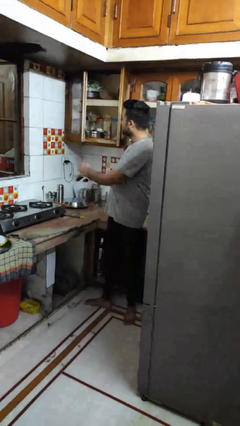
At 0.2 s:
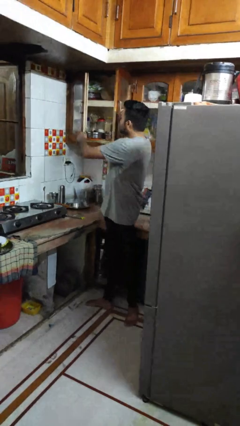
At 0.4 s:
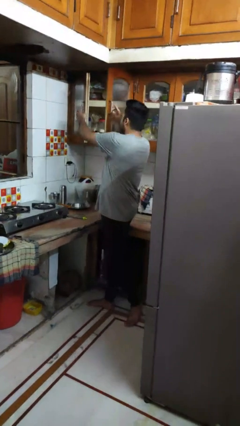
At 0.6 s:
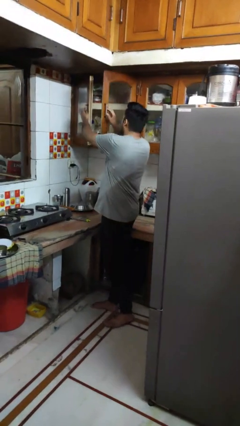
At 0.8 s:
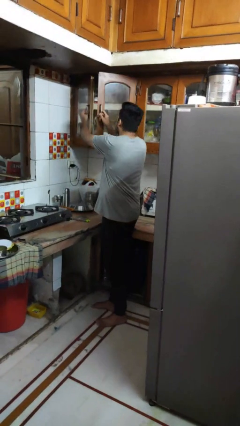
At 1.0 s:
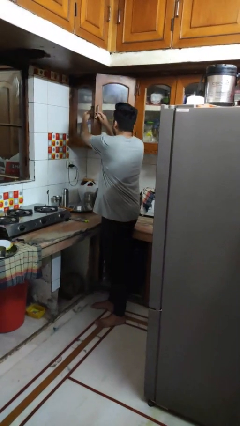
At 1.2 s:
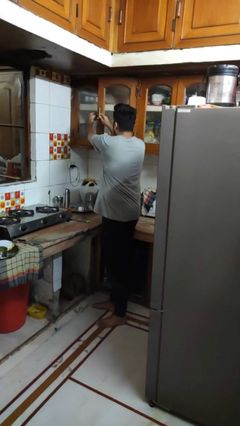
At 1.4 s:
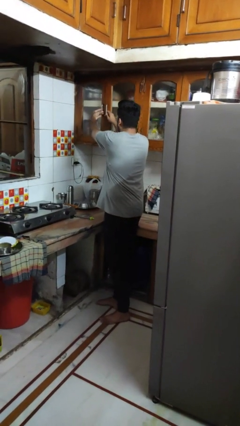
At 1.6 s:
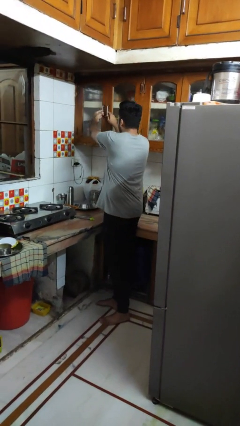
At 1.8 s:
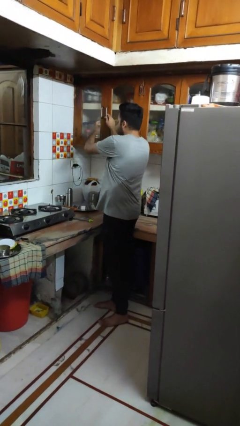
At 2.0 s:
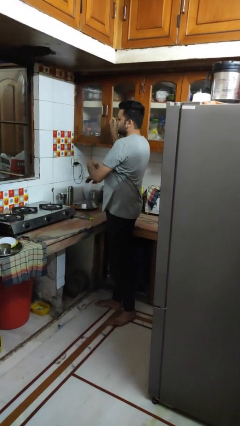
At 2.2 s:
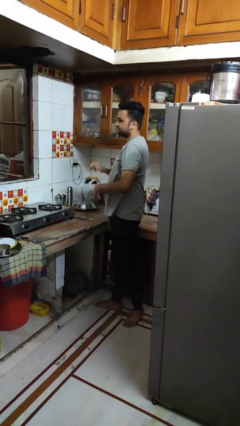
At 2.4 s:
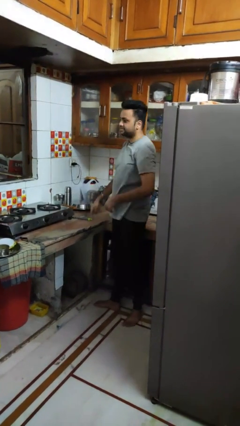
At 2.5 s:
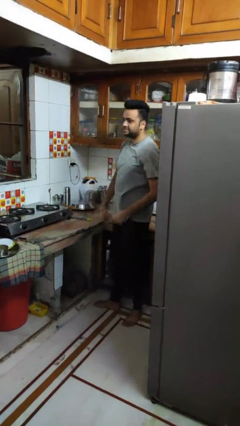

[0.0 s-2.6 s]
person closes cabinet

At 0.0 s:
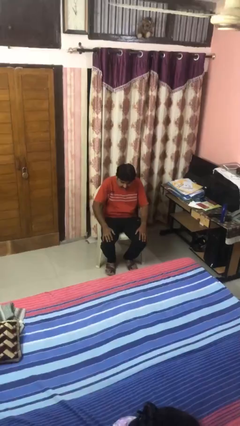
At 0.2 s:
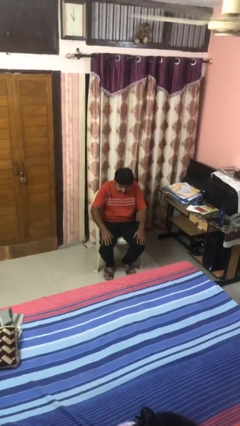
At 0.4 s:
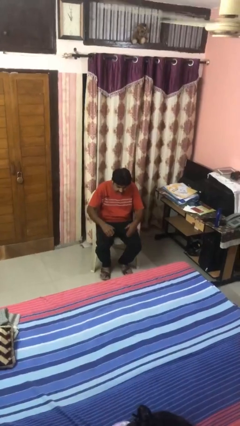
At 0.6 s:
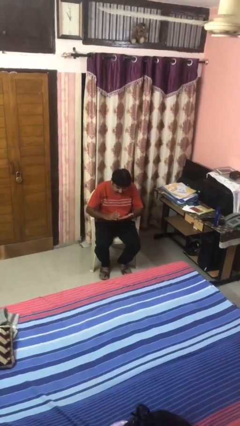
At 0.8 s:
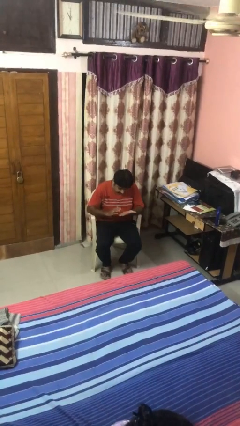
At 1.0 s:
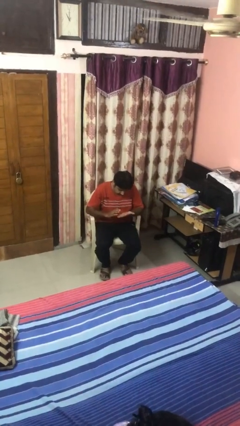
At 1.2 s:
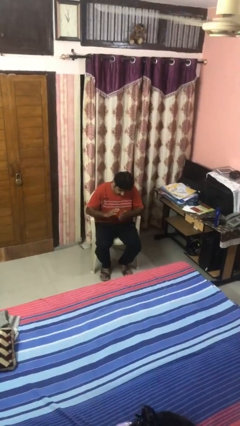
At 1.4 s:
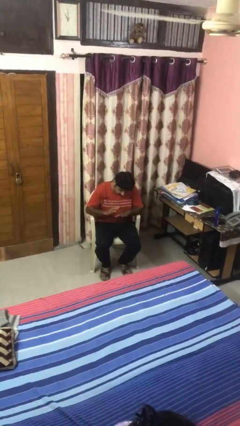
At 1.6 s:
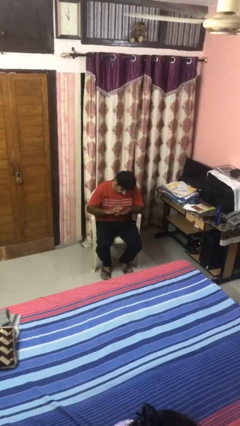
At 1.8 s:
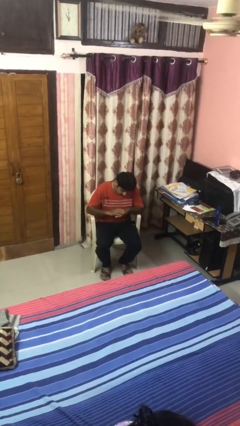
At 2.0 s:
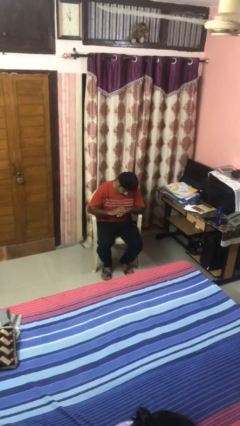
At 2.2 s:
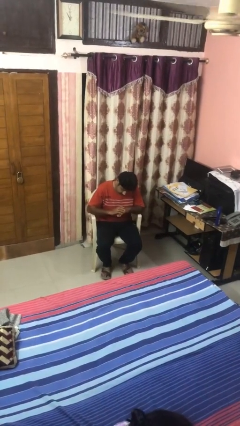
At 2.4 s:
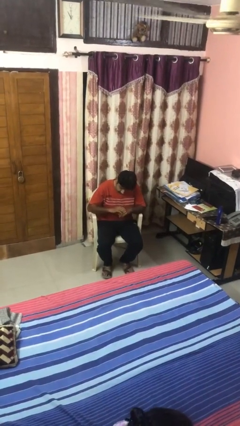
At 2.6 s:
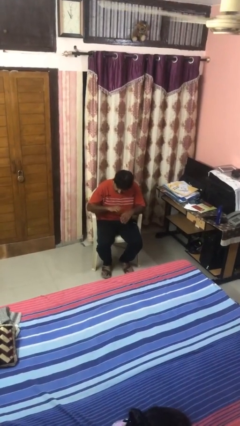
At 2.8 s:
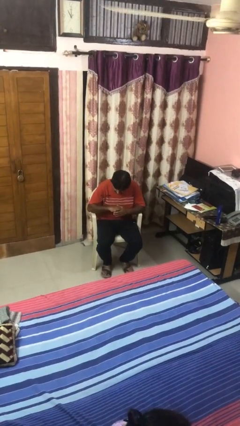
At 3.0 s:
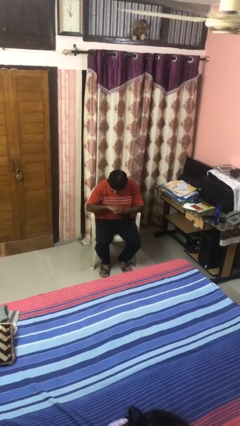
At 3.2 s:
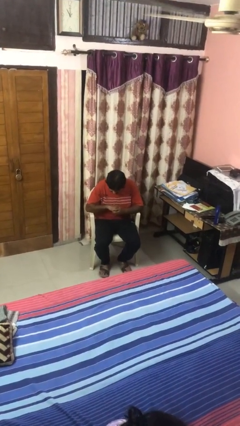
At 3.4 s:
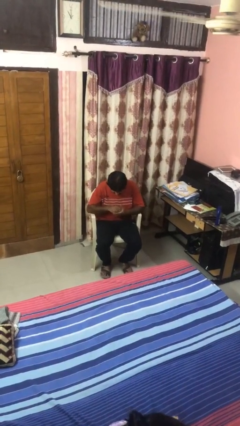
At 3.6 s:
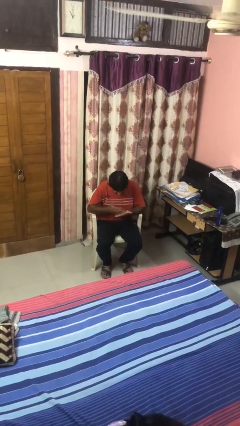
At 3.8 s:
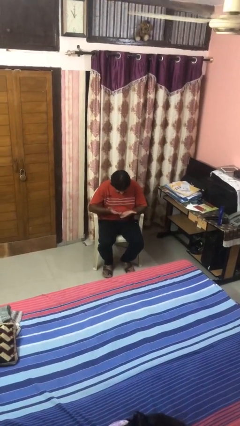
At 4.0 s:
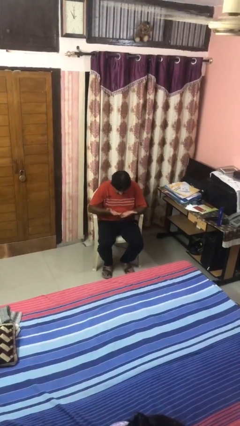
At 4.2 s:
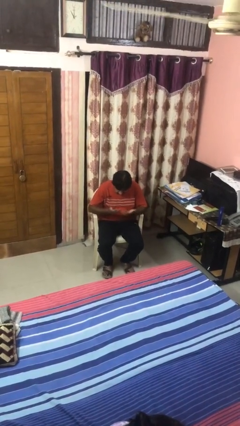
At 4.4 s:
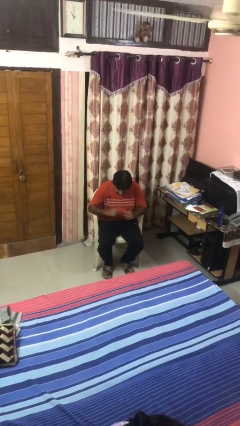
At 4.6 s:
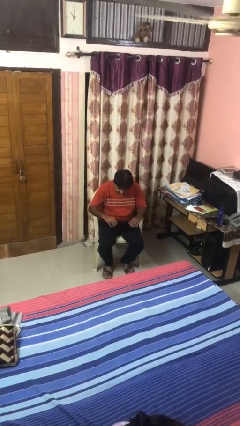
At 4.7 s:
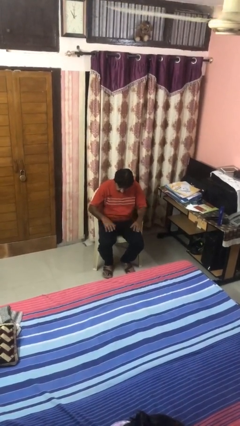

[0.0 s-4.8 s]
person looks at hands in lap

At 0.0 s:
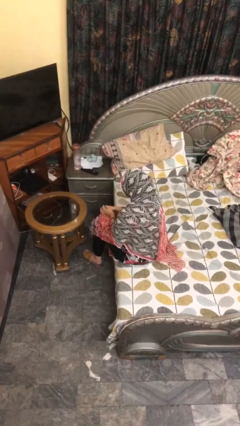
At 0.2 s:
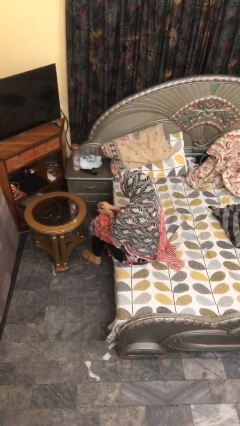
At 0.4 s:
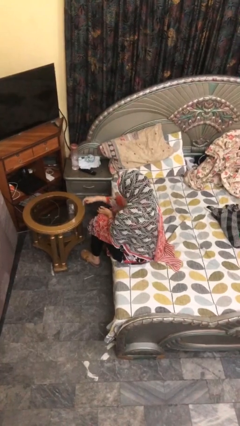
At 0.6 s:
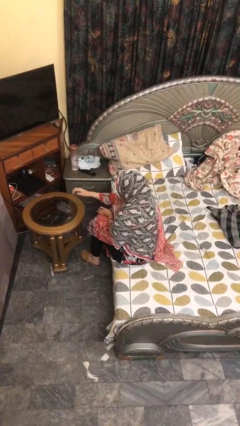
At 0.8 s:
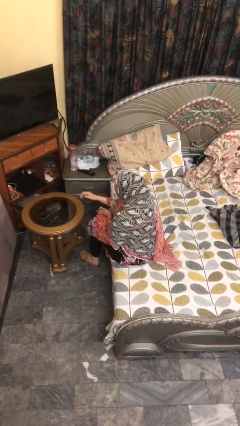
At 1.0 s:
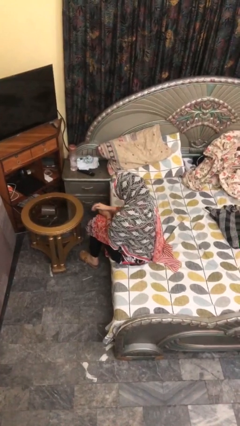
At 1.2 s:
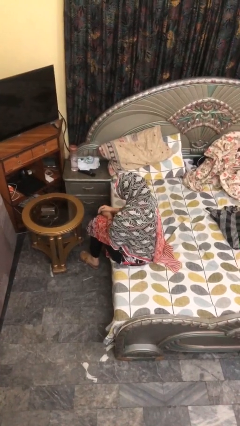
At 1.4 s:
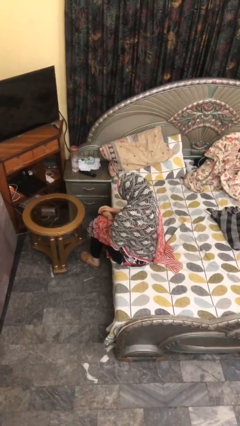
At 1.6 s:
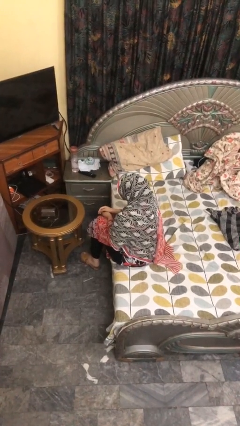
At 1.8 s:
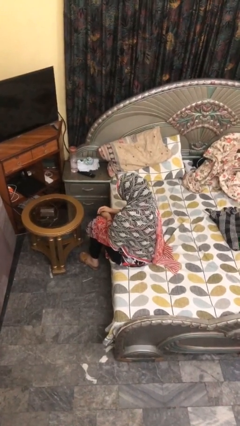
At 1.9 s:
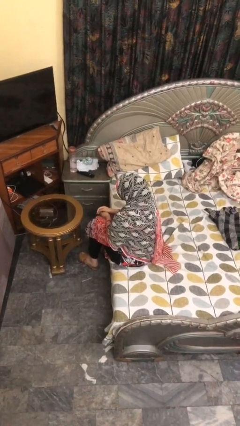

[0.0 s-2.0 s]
person knocks over glass

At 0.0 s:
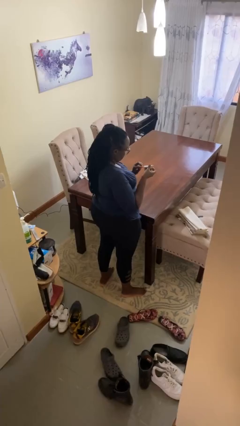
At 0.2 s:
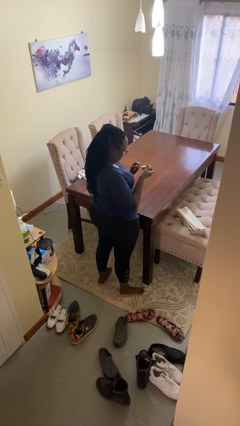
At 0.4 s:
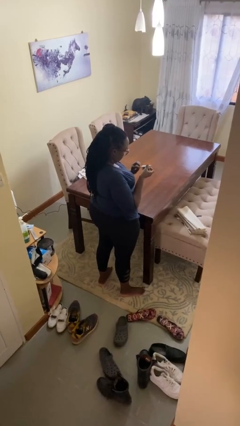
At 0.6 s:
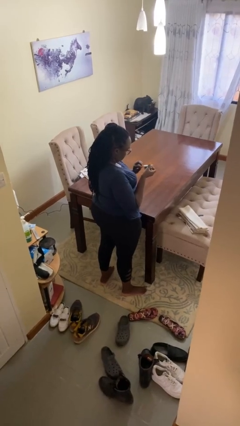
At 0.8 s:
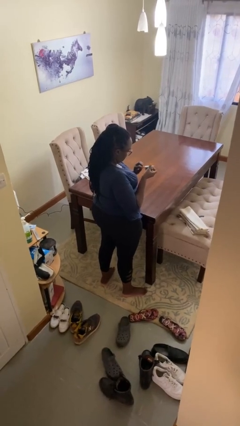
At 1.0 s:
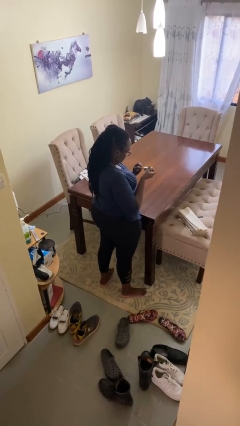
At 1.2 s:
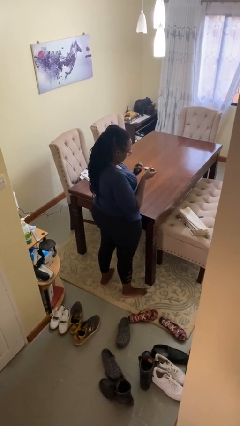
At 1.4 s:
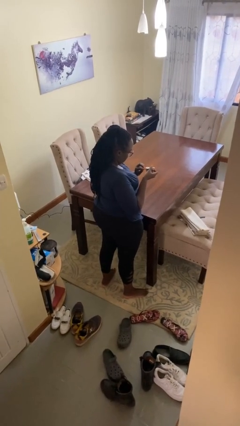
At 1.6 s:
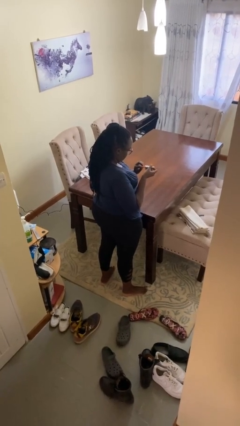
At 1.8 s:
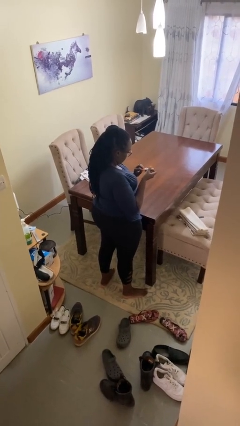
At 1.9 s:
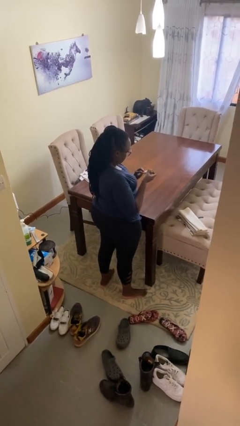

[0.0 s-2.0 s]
person clips fingernails

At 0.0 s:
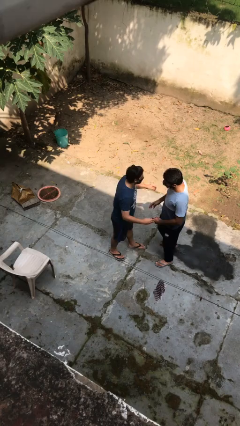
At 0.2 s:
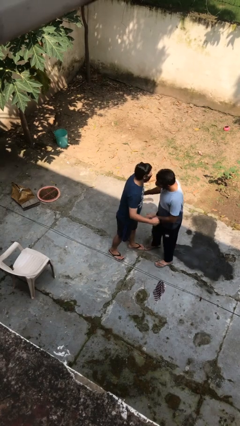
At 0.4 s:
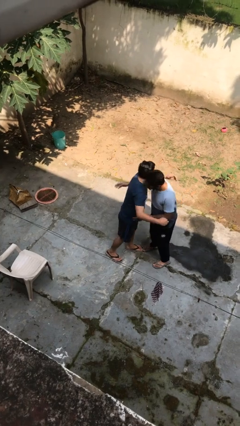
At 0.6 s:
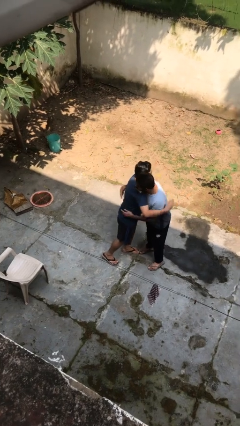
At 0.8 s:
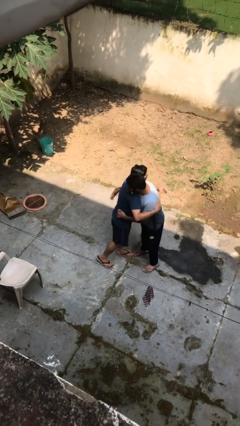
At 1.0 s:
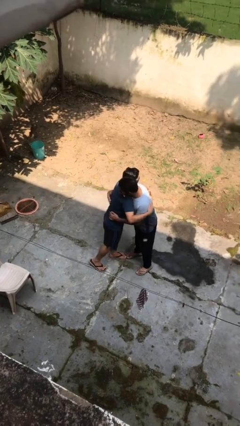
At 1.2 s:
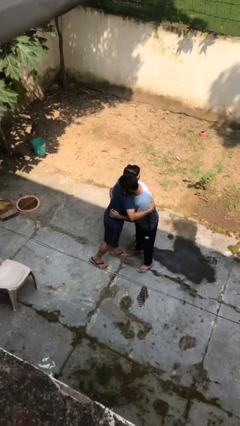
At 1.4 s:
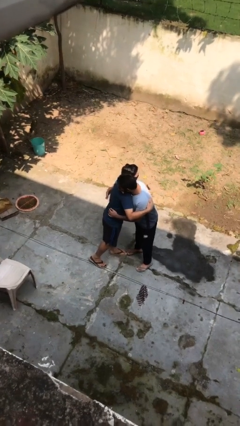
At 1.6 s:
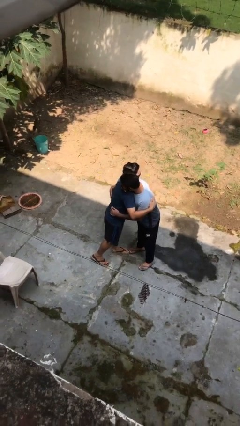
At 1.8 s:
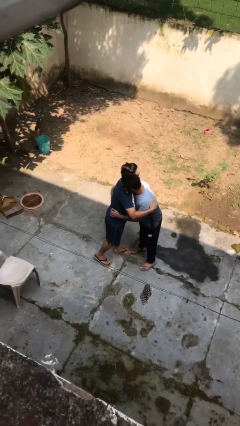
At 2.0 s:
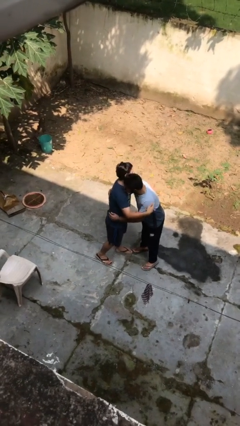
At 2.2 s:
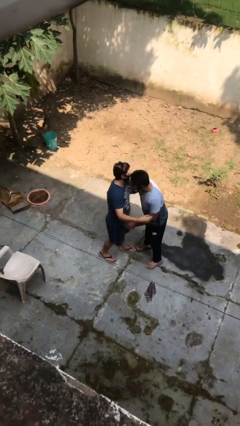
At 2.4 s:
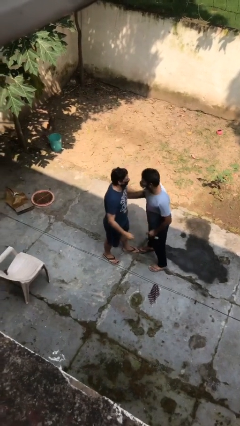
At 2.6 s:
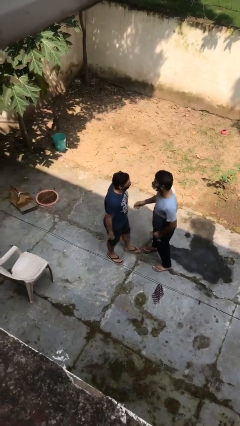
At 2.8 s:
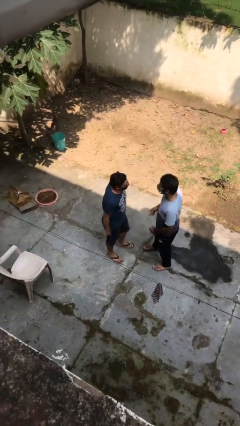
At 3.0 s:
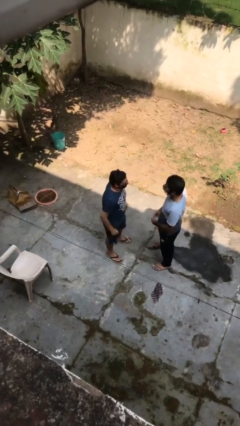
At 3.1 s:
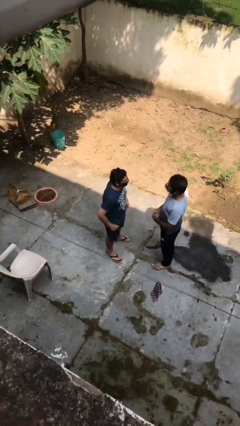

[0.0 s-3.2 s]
person embraces person

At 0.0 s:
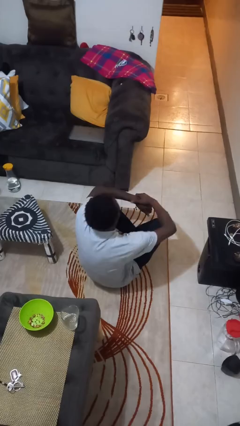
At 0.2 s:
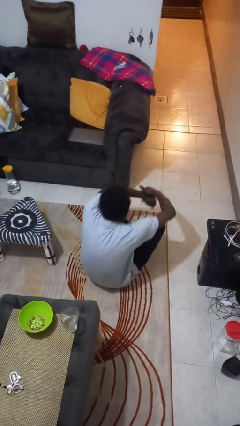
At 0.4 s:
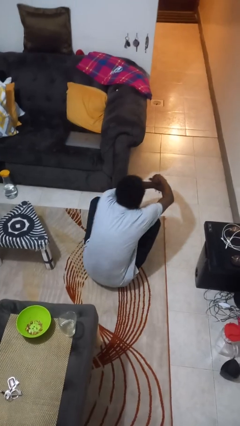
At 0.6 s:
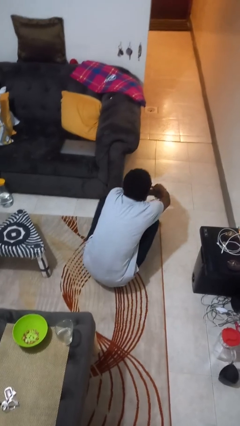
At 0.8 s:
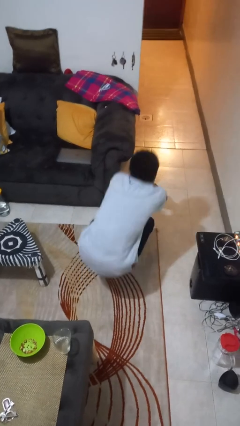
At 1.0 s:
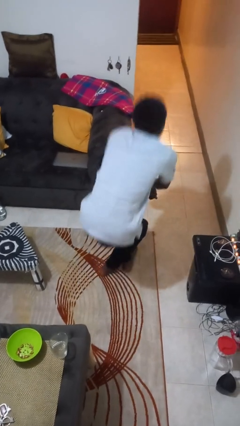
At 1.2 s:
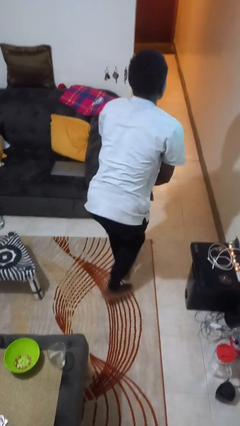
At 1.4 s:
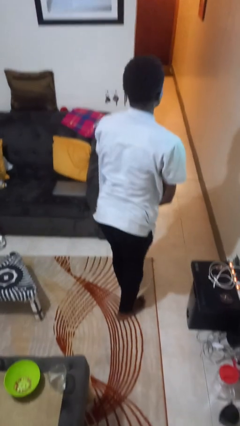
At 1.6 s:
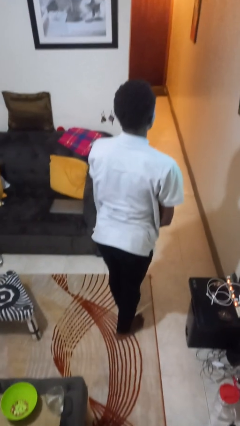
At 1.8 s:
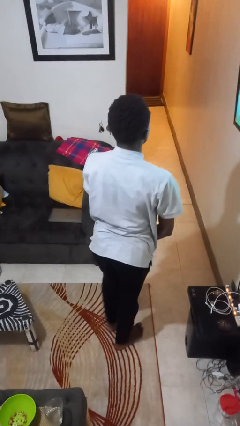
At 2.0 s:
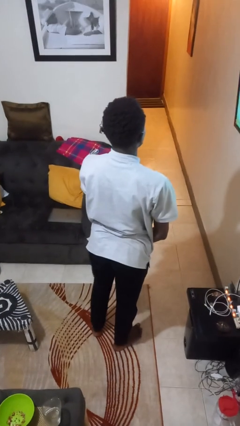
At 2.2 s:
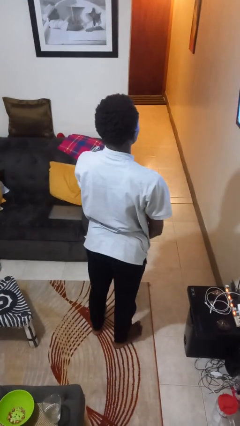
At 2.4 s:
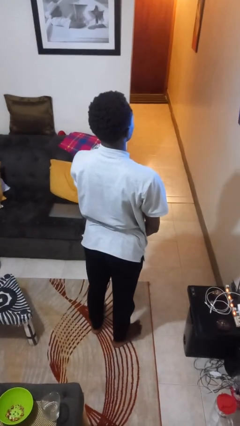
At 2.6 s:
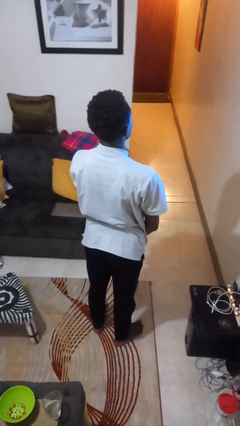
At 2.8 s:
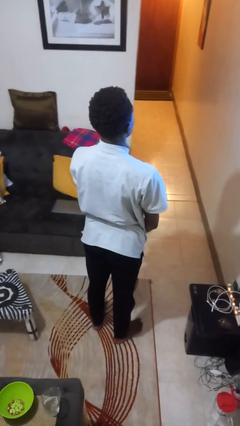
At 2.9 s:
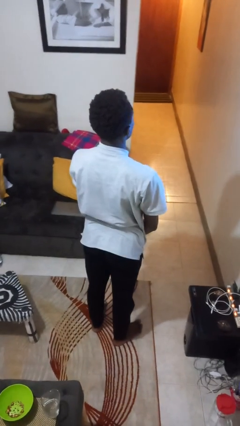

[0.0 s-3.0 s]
person stands up from floor
